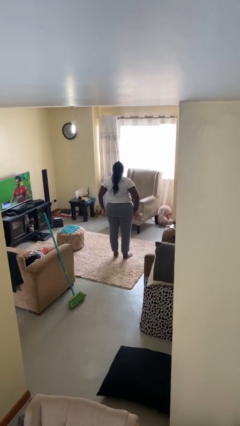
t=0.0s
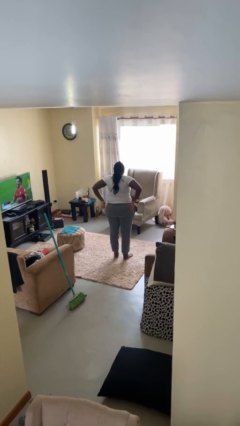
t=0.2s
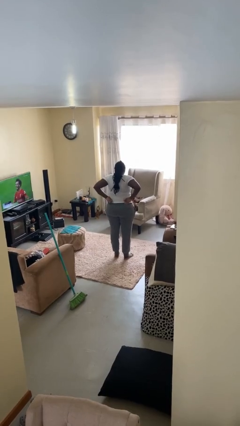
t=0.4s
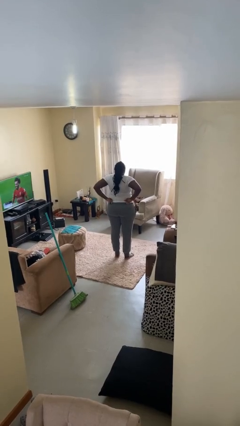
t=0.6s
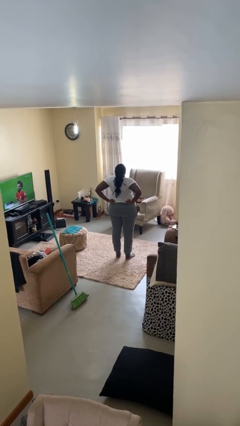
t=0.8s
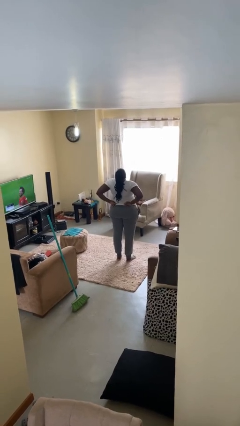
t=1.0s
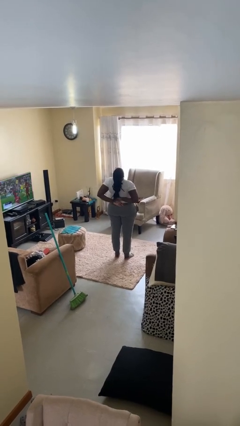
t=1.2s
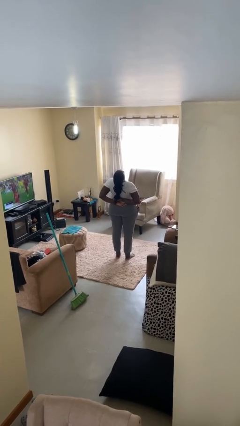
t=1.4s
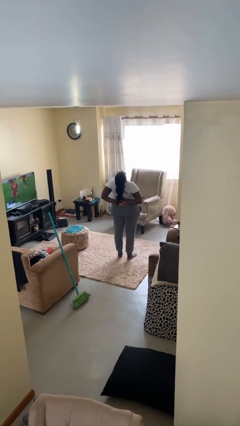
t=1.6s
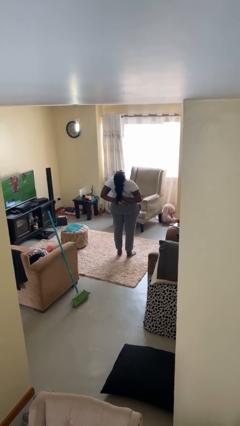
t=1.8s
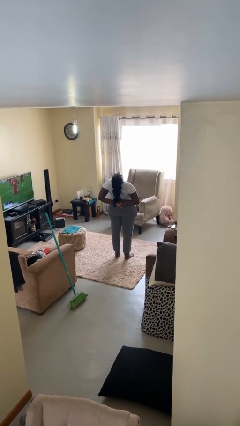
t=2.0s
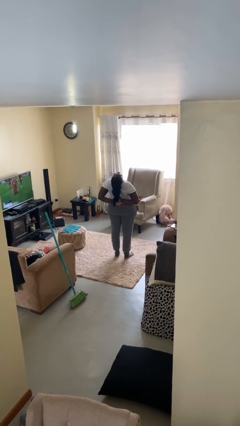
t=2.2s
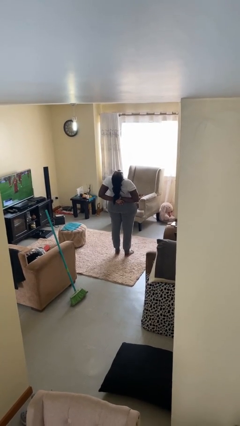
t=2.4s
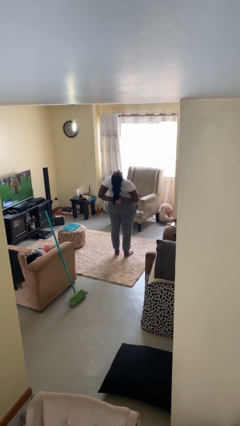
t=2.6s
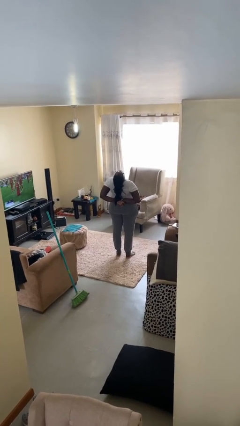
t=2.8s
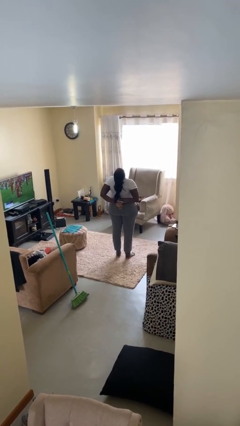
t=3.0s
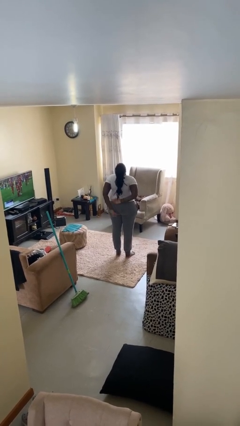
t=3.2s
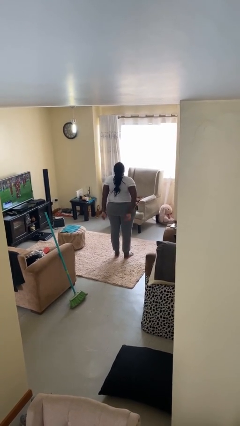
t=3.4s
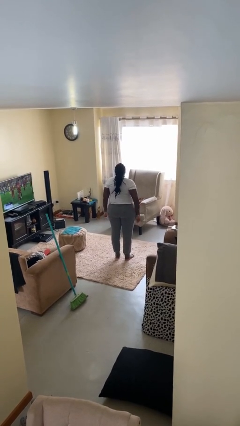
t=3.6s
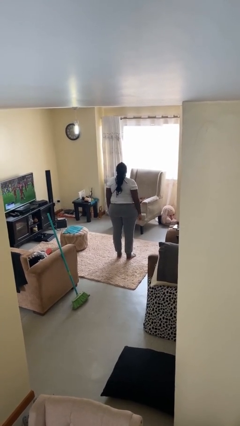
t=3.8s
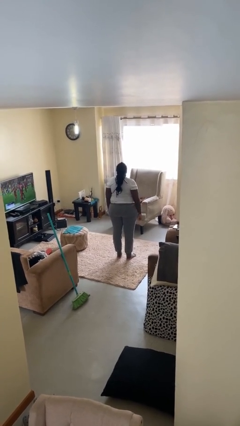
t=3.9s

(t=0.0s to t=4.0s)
person stretches back

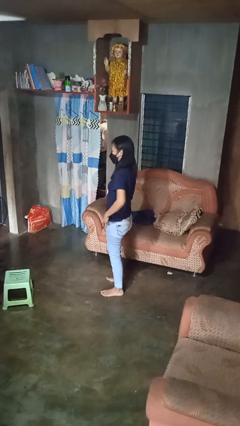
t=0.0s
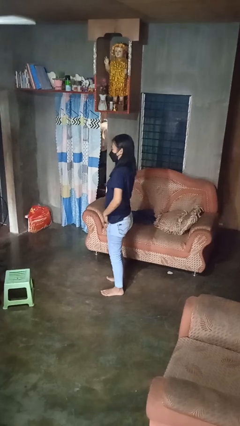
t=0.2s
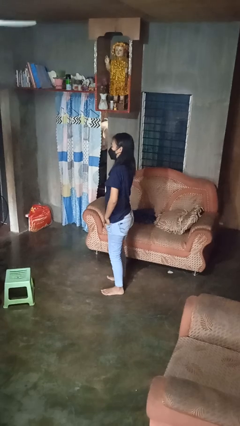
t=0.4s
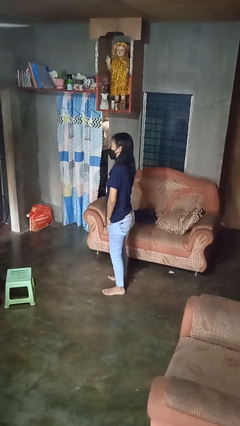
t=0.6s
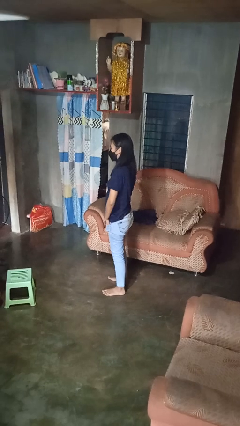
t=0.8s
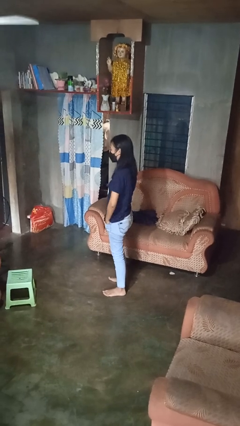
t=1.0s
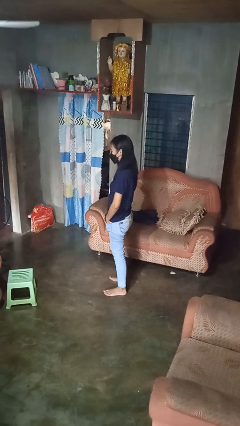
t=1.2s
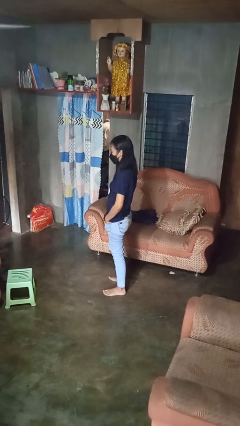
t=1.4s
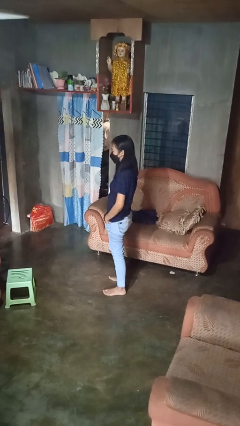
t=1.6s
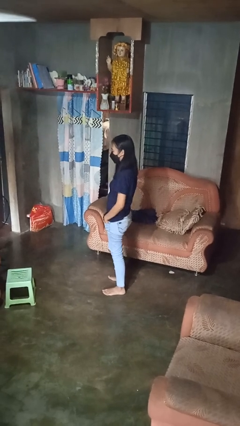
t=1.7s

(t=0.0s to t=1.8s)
person puts hands in back pockets

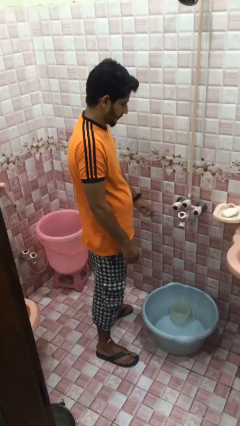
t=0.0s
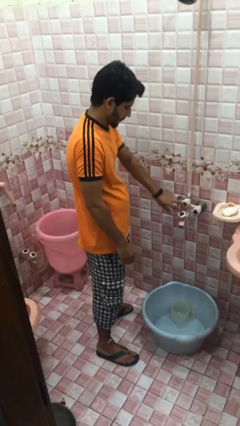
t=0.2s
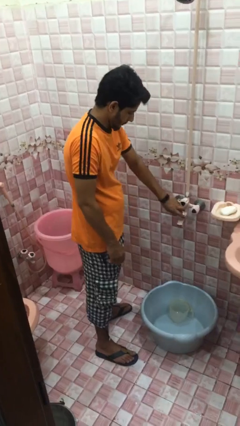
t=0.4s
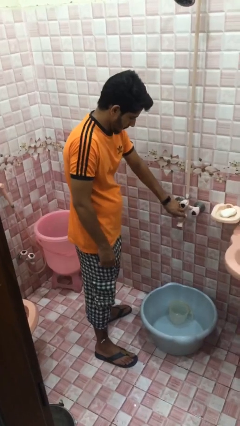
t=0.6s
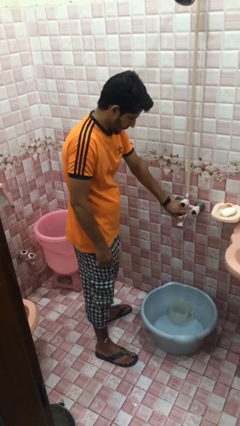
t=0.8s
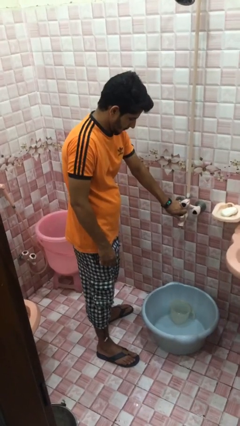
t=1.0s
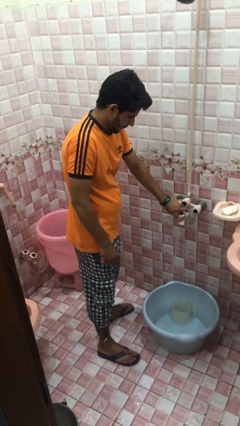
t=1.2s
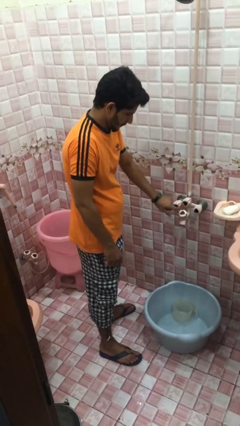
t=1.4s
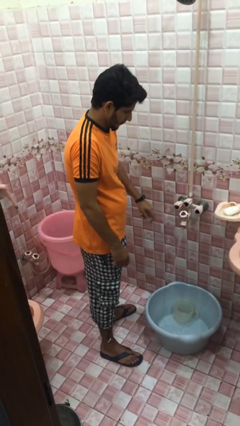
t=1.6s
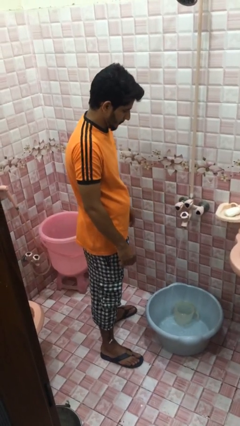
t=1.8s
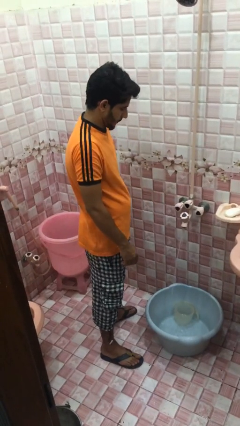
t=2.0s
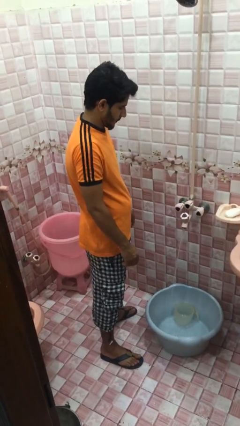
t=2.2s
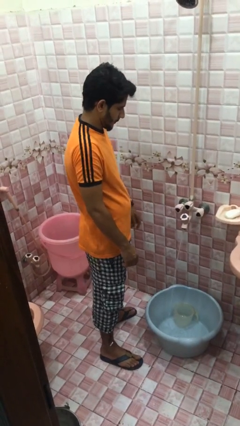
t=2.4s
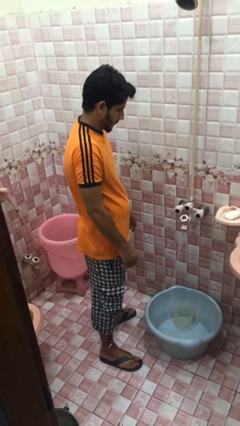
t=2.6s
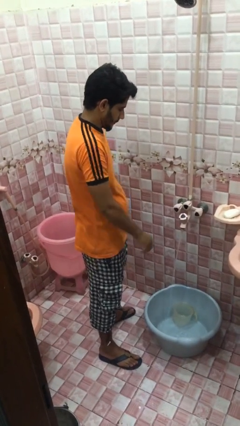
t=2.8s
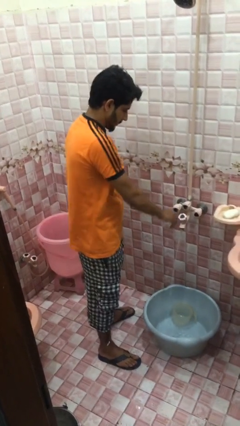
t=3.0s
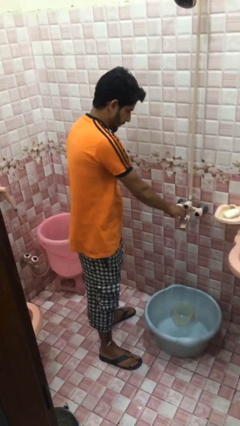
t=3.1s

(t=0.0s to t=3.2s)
person turns on faucet

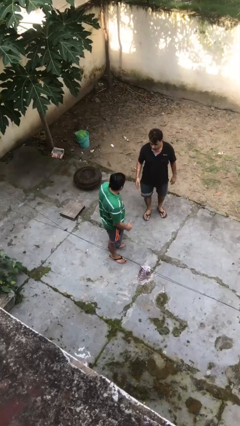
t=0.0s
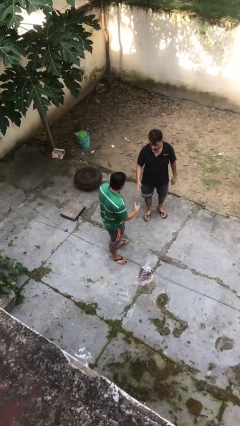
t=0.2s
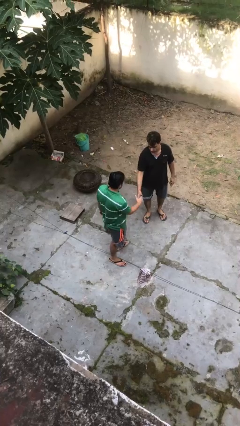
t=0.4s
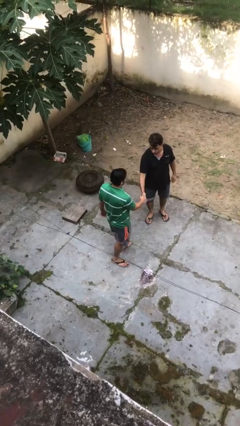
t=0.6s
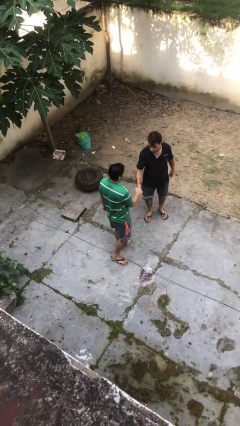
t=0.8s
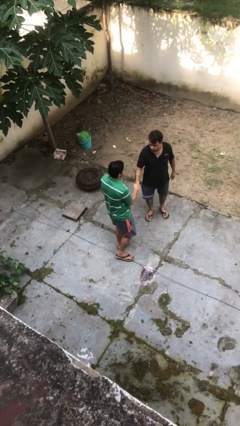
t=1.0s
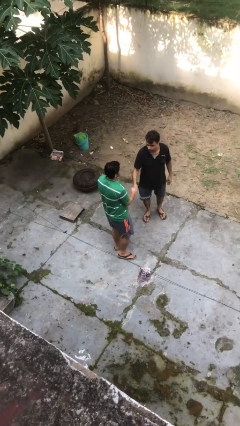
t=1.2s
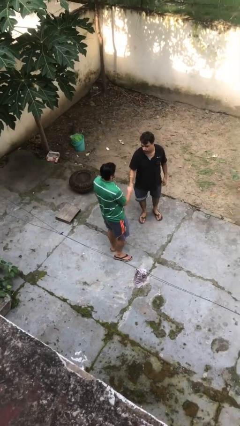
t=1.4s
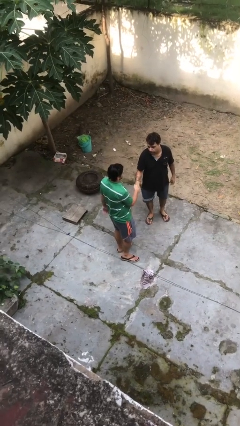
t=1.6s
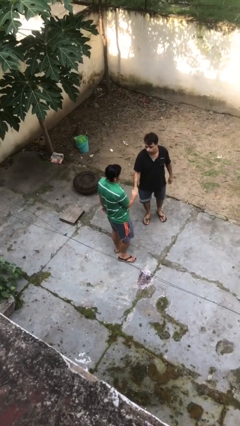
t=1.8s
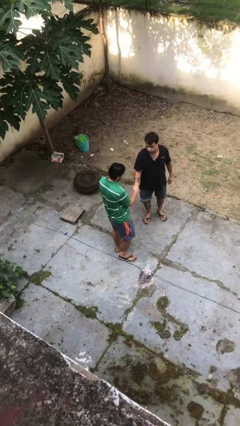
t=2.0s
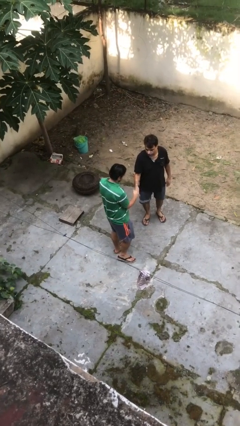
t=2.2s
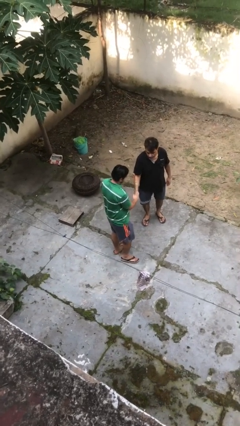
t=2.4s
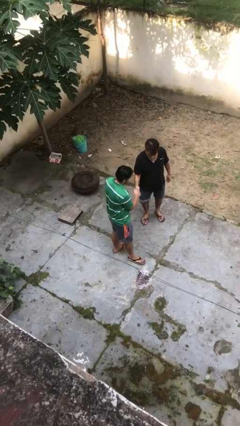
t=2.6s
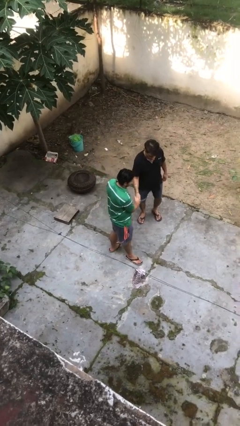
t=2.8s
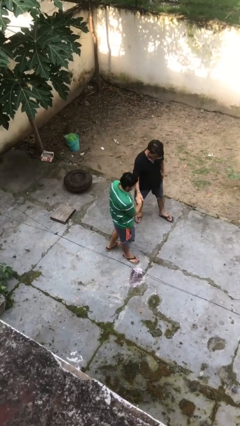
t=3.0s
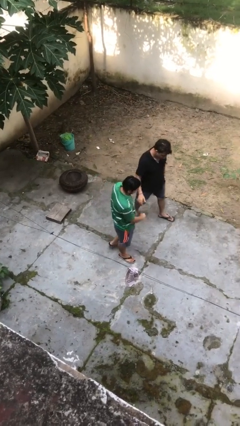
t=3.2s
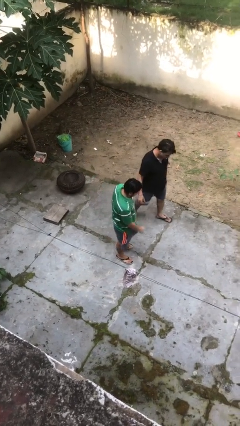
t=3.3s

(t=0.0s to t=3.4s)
person shakes hand

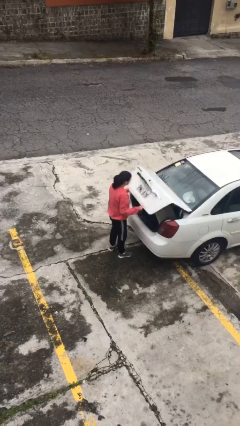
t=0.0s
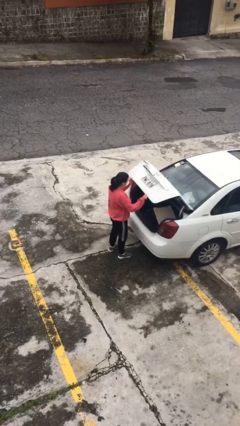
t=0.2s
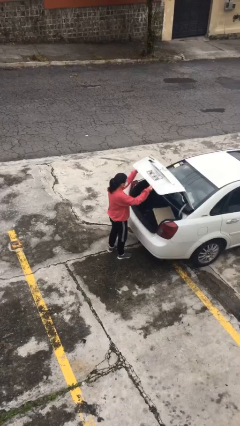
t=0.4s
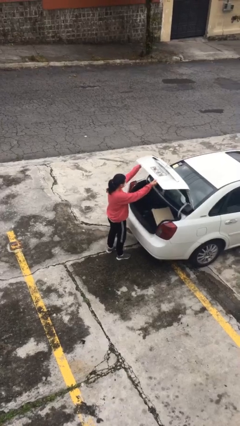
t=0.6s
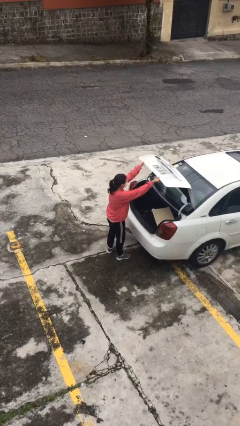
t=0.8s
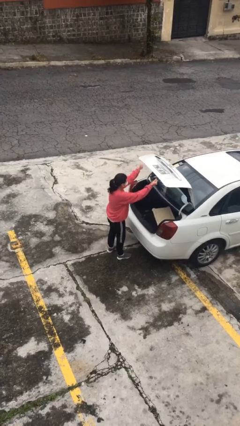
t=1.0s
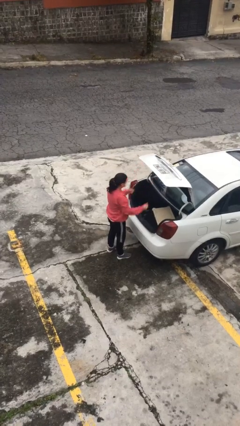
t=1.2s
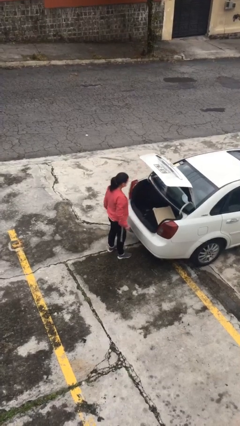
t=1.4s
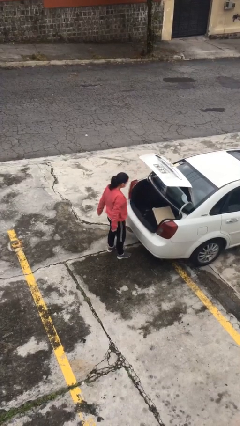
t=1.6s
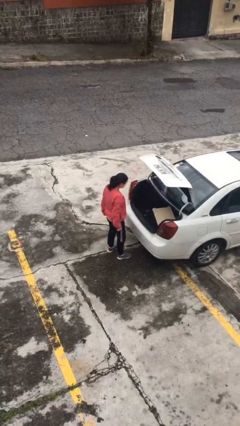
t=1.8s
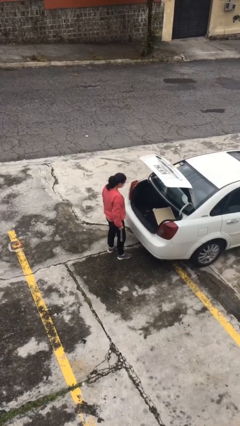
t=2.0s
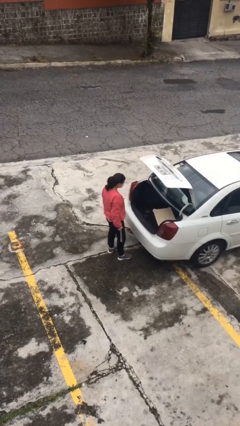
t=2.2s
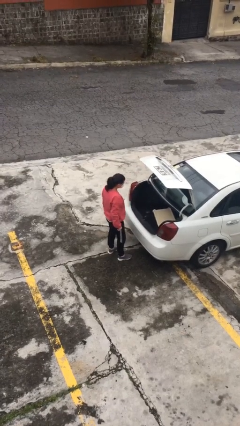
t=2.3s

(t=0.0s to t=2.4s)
person opens car trunk

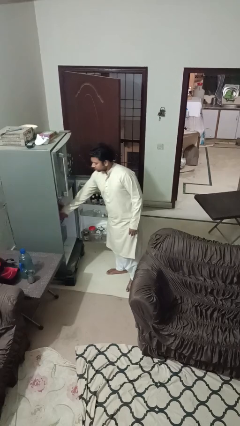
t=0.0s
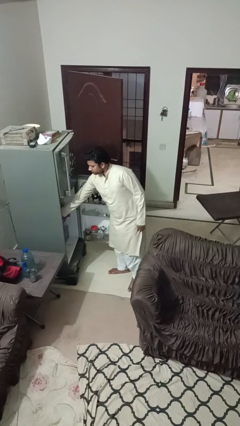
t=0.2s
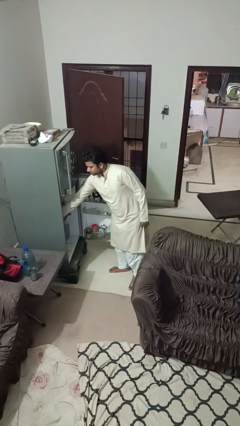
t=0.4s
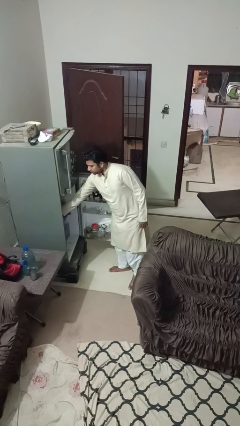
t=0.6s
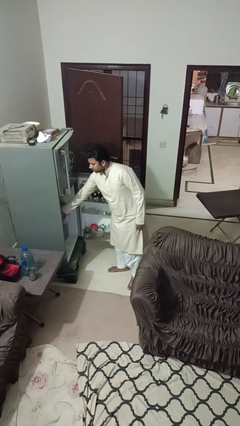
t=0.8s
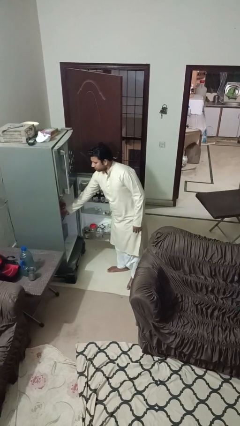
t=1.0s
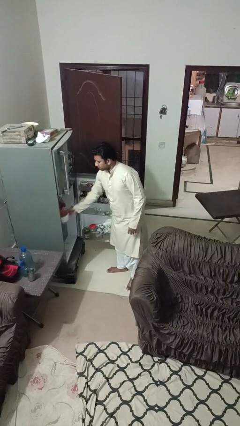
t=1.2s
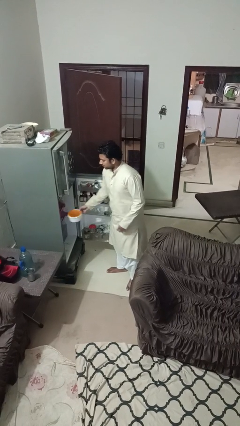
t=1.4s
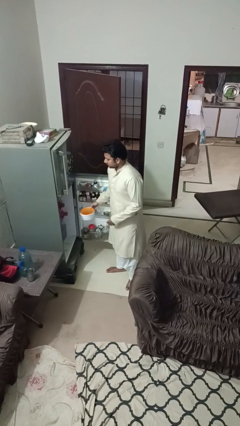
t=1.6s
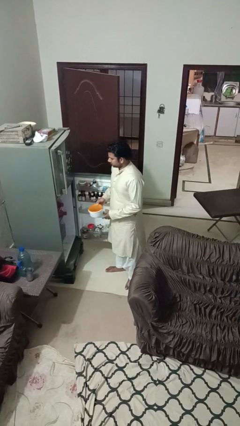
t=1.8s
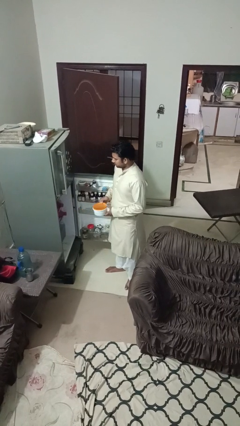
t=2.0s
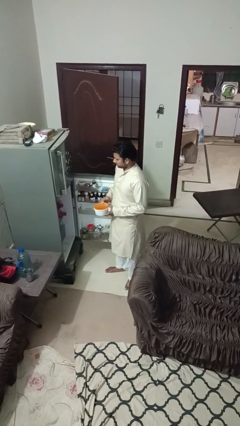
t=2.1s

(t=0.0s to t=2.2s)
person takes object from refrigerator

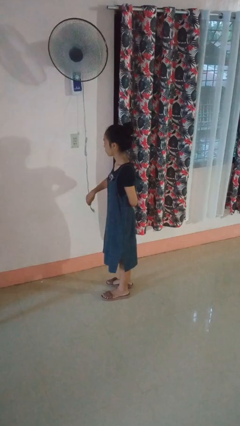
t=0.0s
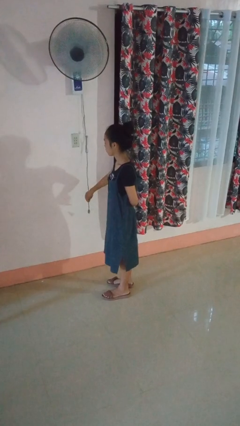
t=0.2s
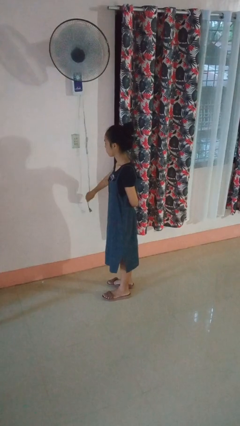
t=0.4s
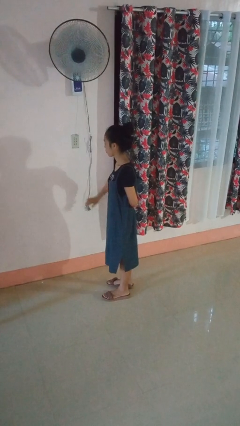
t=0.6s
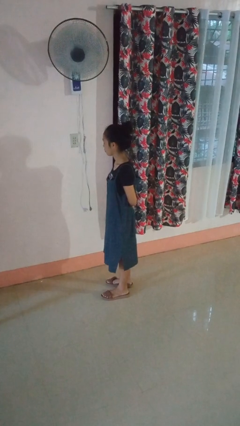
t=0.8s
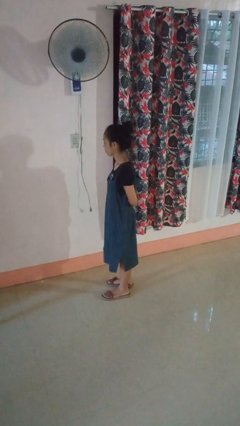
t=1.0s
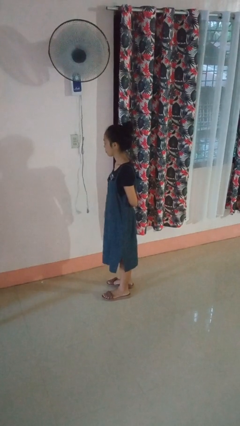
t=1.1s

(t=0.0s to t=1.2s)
person unplugs from electrical socket
